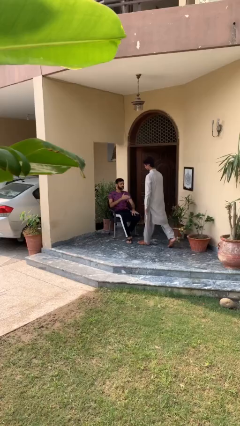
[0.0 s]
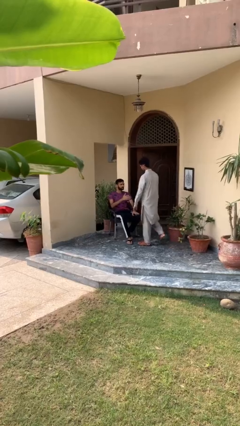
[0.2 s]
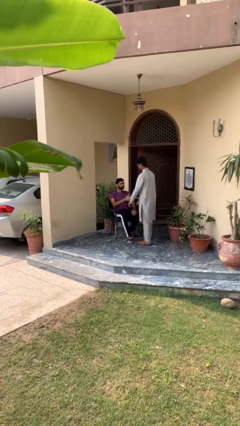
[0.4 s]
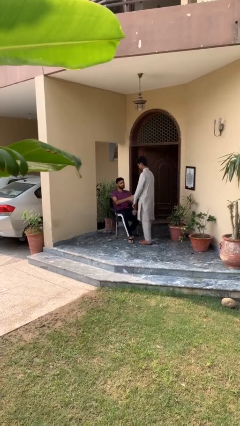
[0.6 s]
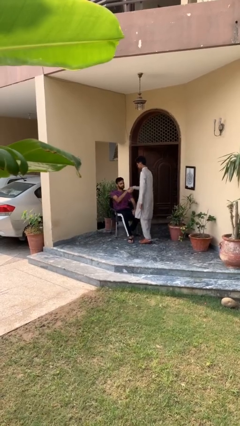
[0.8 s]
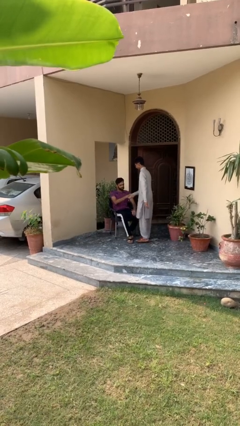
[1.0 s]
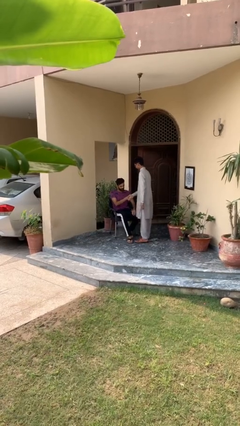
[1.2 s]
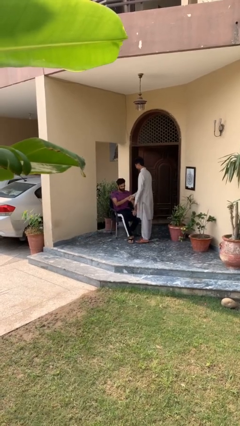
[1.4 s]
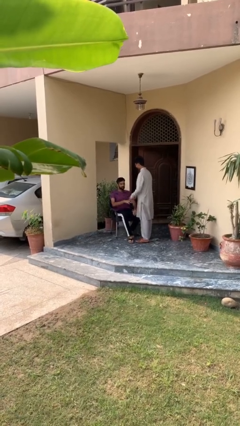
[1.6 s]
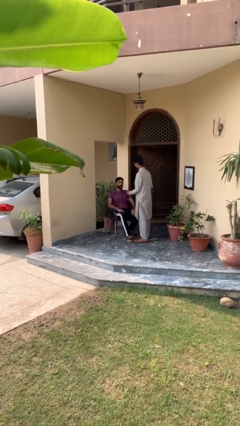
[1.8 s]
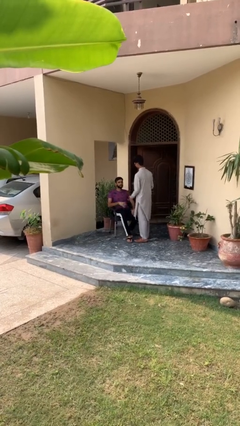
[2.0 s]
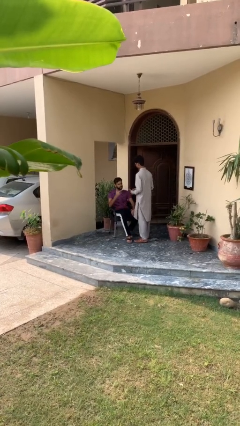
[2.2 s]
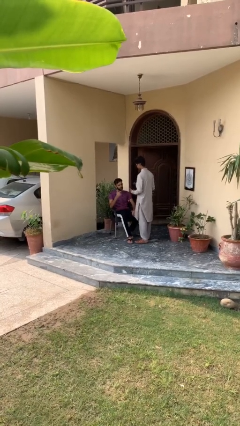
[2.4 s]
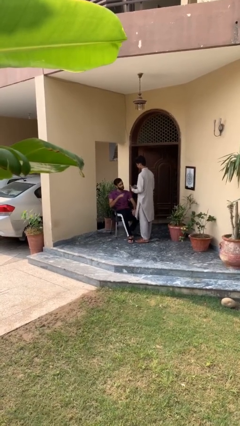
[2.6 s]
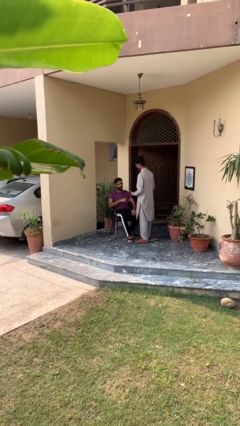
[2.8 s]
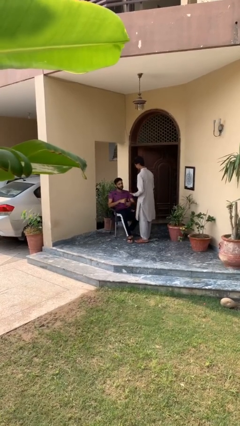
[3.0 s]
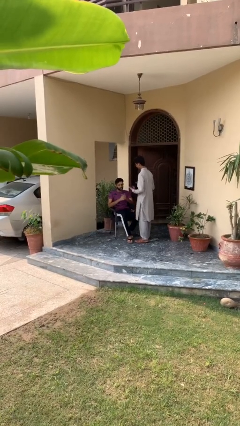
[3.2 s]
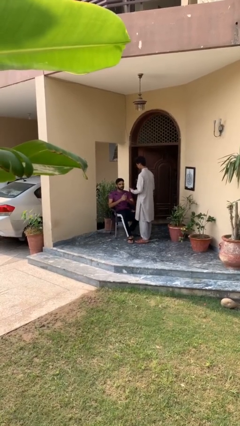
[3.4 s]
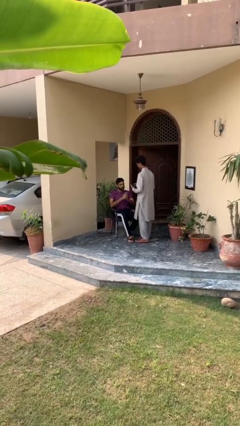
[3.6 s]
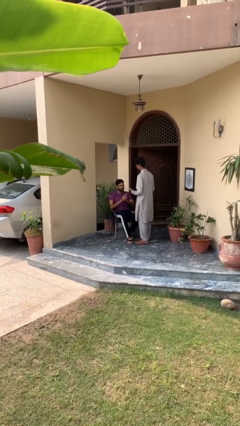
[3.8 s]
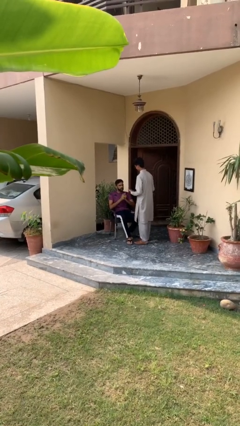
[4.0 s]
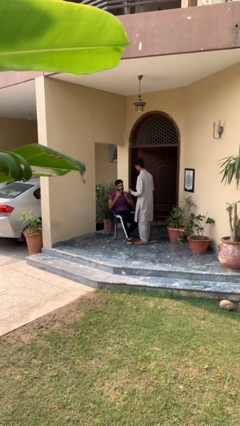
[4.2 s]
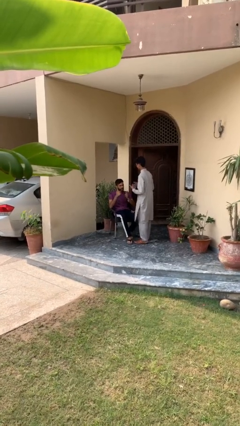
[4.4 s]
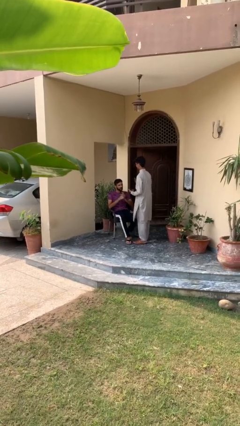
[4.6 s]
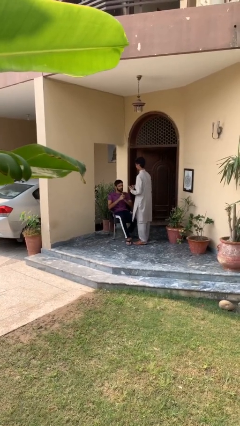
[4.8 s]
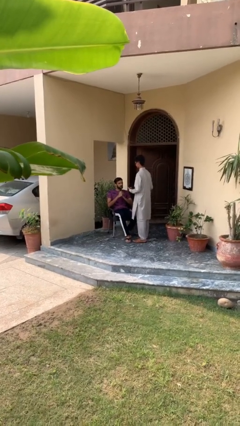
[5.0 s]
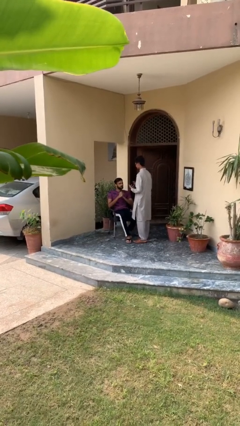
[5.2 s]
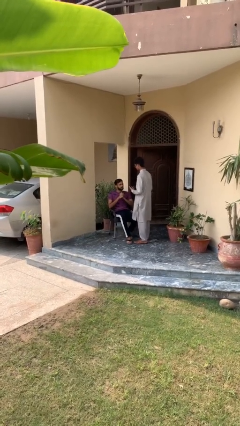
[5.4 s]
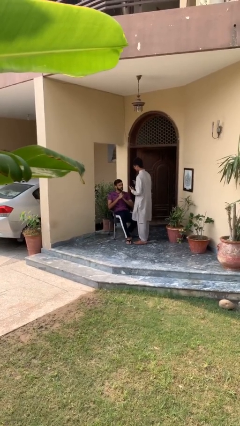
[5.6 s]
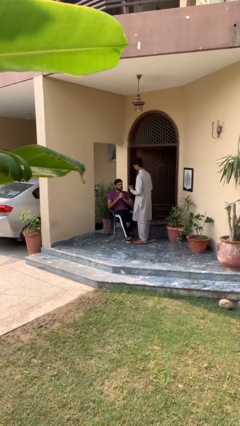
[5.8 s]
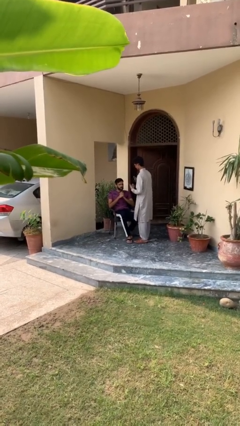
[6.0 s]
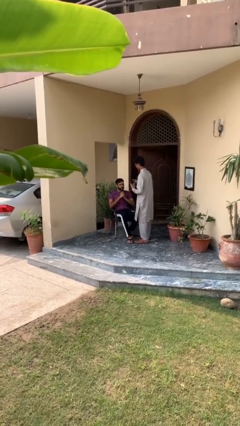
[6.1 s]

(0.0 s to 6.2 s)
person shakes hand

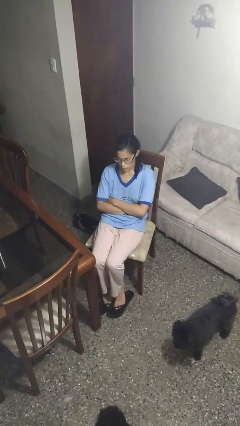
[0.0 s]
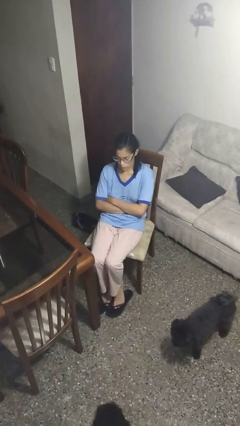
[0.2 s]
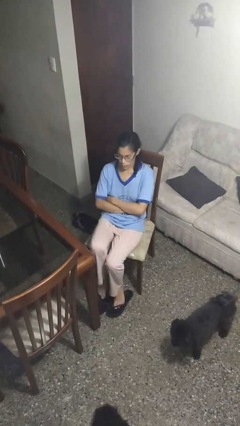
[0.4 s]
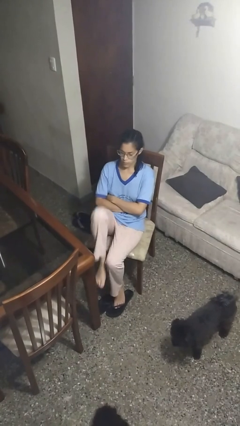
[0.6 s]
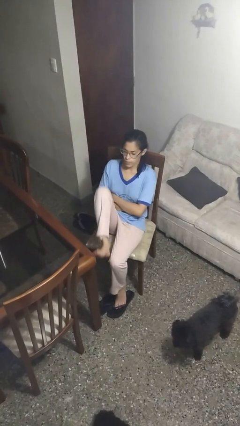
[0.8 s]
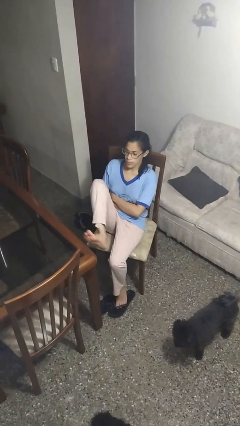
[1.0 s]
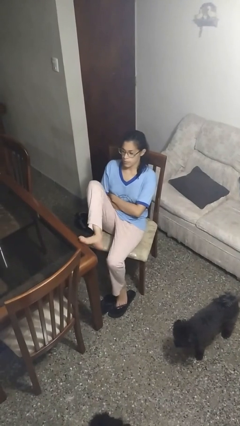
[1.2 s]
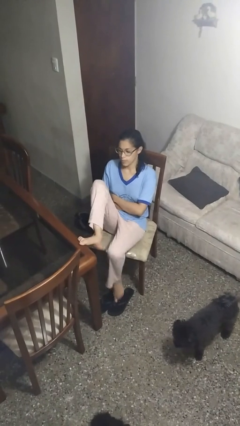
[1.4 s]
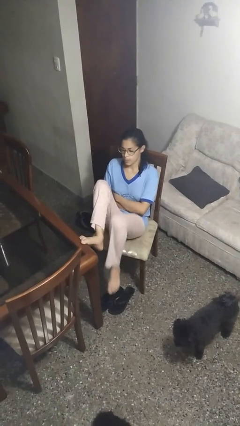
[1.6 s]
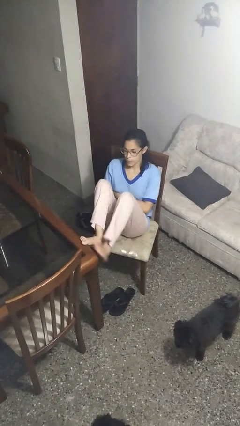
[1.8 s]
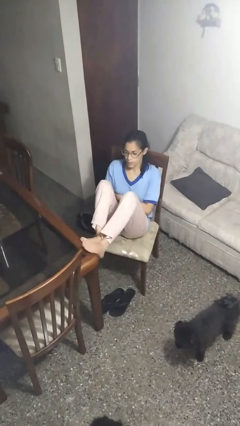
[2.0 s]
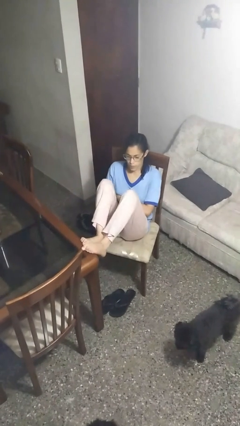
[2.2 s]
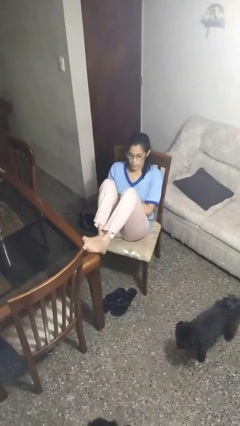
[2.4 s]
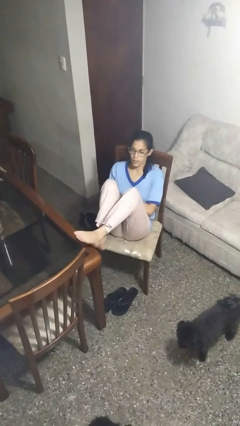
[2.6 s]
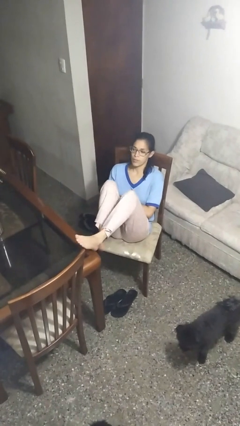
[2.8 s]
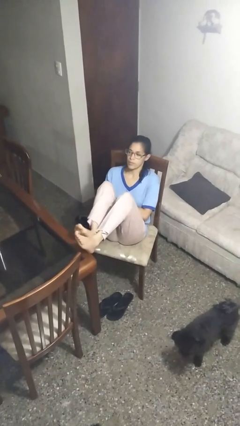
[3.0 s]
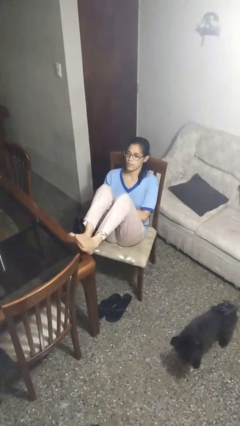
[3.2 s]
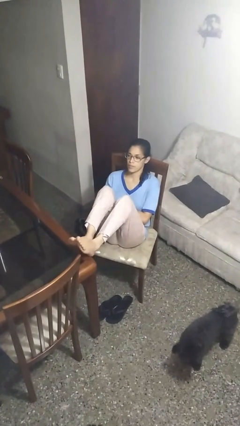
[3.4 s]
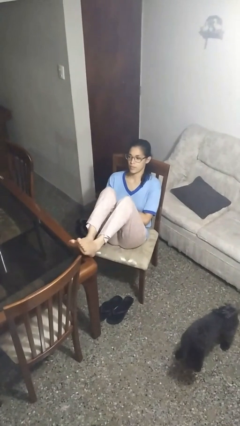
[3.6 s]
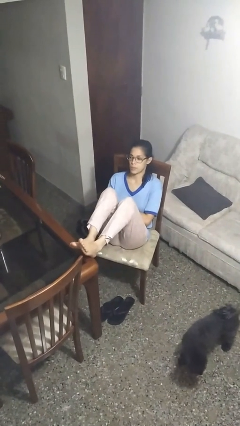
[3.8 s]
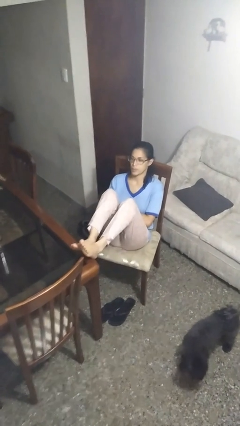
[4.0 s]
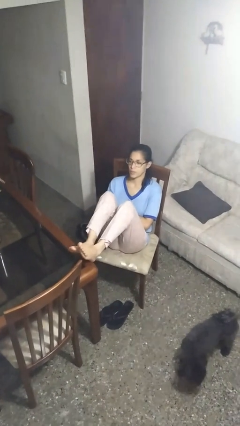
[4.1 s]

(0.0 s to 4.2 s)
person puts feet up

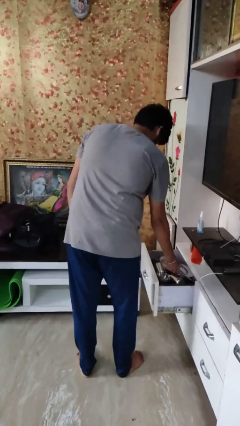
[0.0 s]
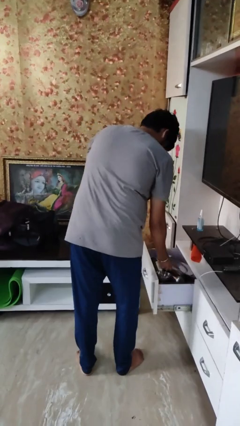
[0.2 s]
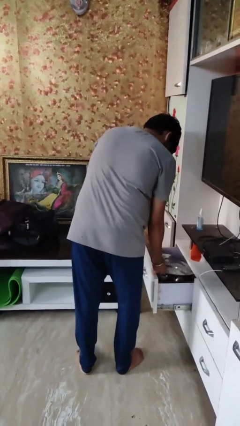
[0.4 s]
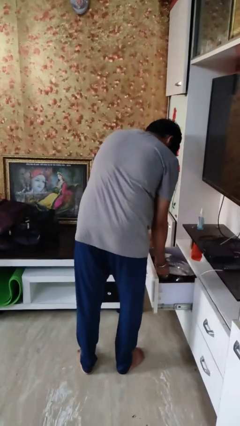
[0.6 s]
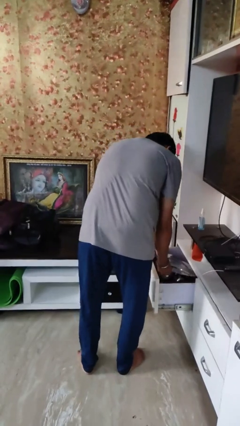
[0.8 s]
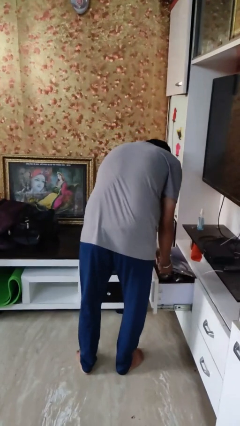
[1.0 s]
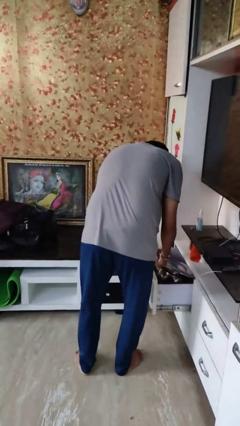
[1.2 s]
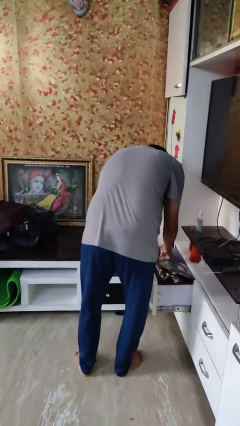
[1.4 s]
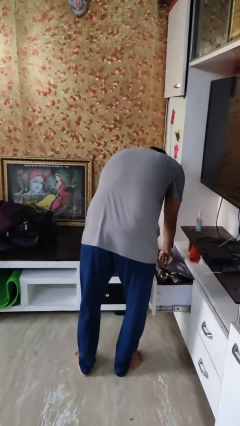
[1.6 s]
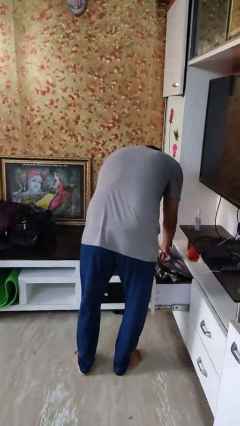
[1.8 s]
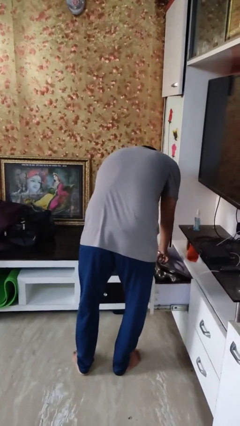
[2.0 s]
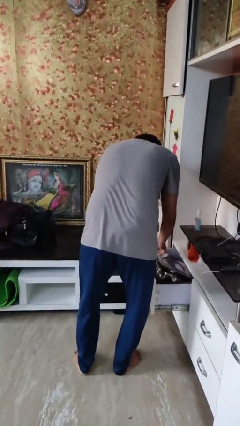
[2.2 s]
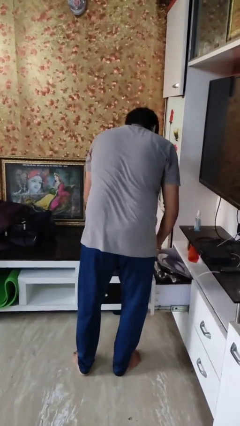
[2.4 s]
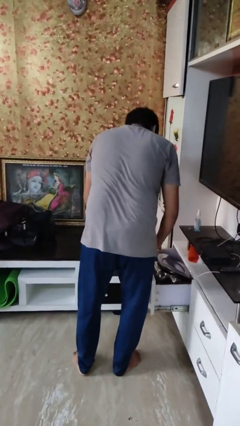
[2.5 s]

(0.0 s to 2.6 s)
person searches in kitchen drawer

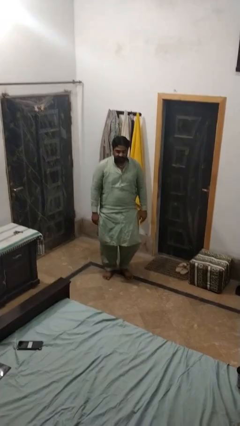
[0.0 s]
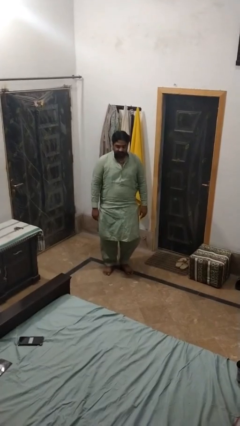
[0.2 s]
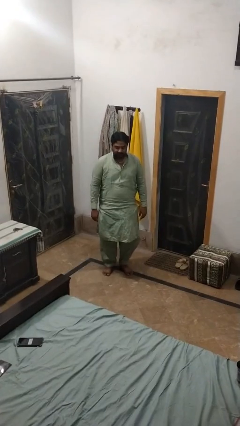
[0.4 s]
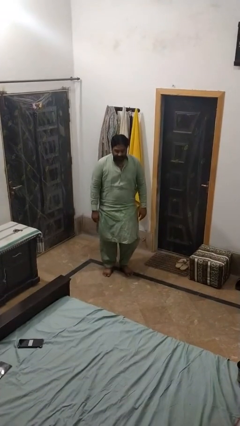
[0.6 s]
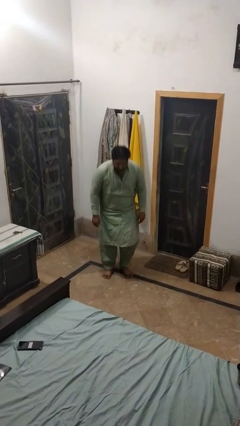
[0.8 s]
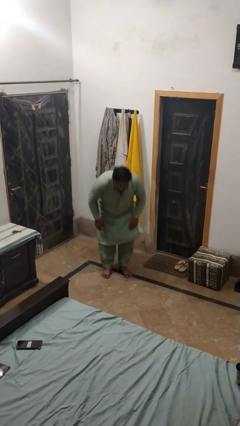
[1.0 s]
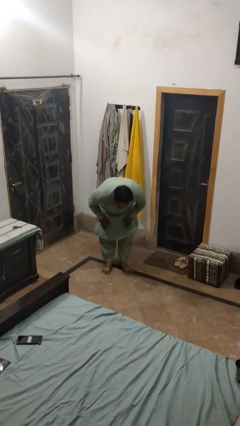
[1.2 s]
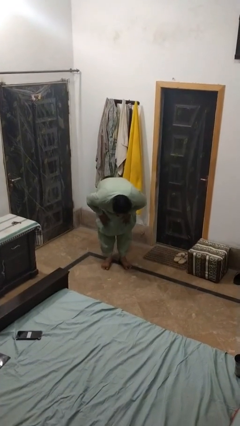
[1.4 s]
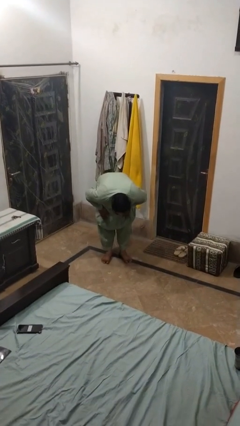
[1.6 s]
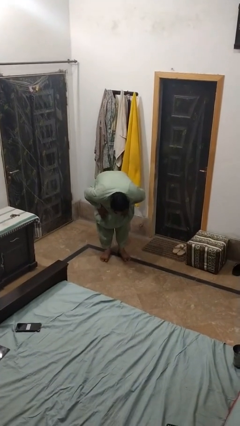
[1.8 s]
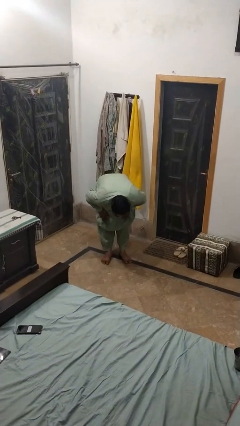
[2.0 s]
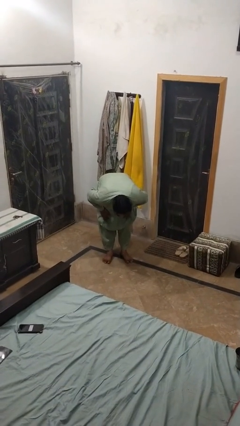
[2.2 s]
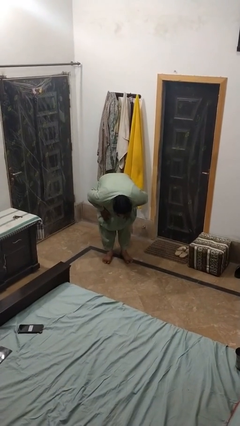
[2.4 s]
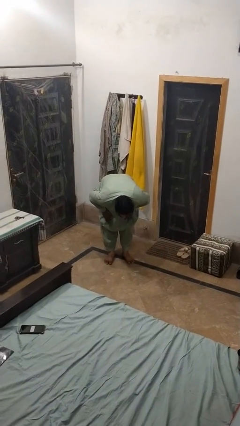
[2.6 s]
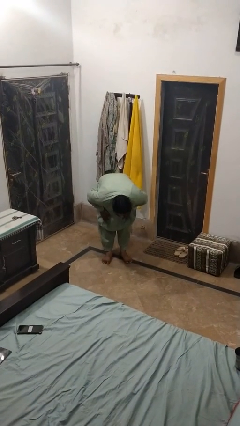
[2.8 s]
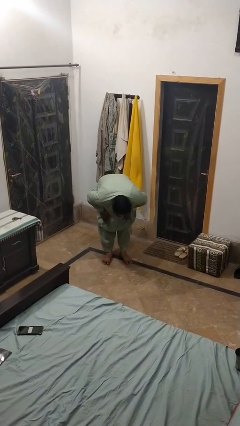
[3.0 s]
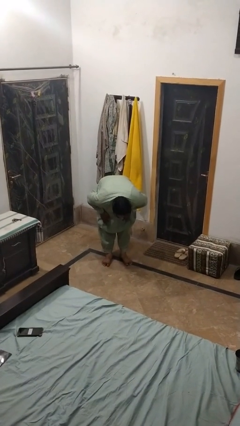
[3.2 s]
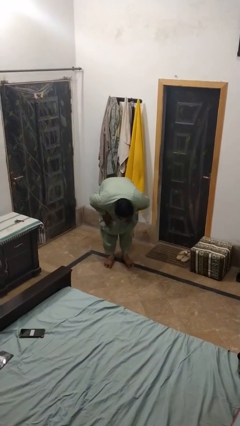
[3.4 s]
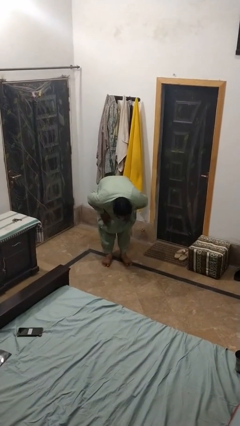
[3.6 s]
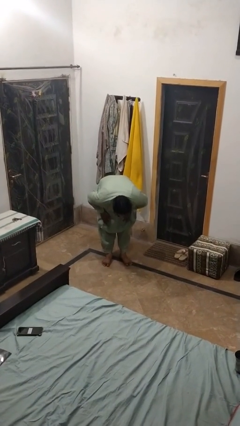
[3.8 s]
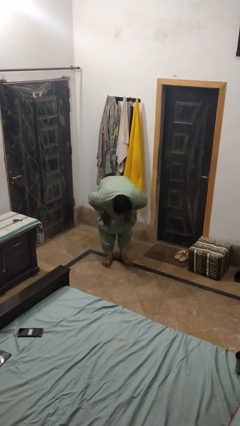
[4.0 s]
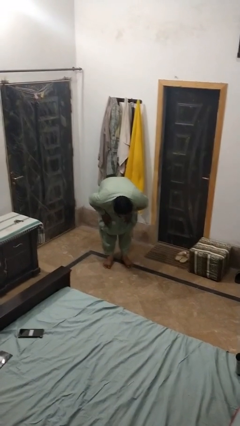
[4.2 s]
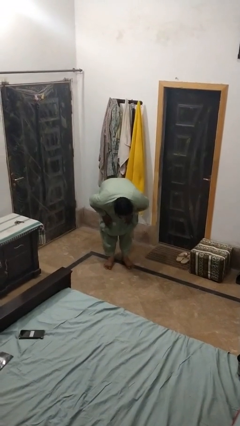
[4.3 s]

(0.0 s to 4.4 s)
person bows

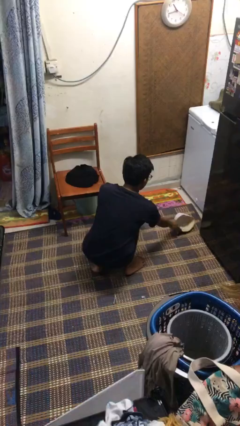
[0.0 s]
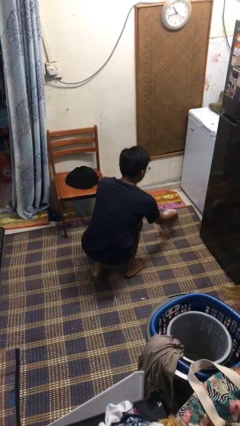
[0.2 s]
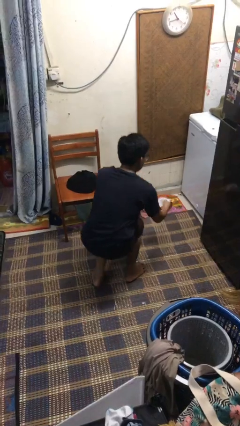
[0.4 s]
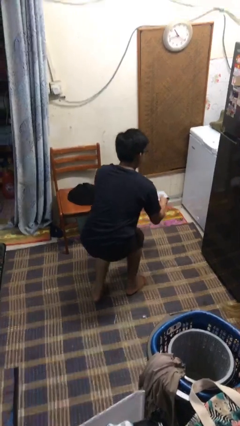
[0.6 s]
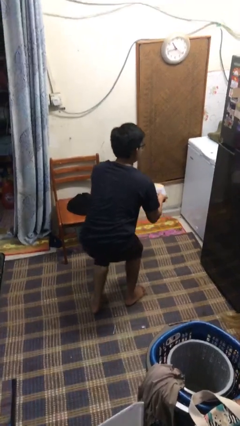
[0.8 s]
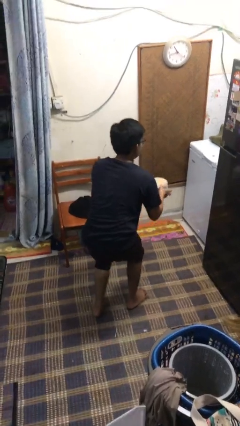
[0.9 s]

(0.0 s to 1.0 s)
person picks up object from floor
